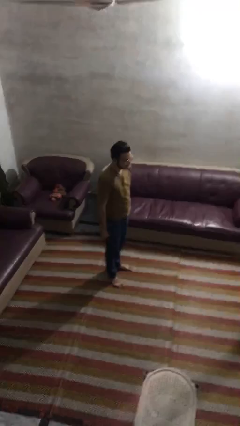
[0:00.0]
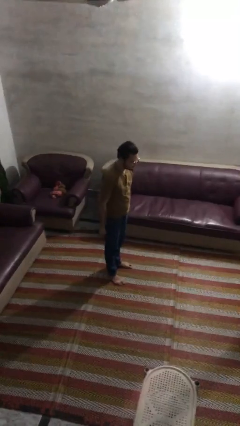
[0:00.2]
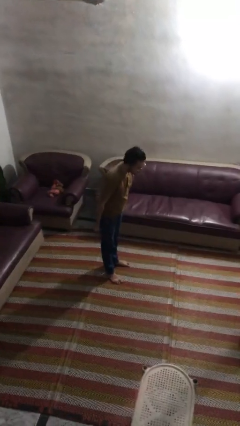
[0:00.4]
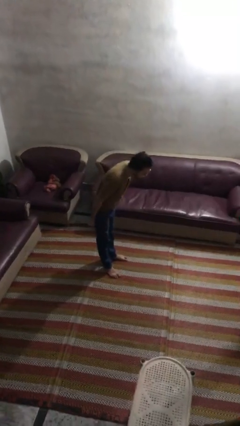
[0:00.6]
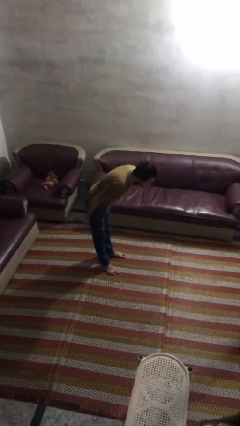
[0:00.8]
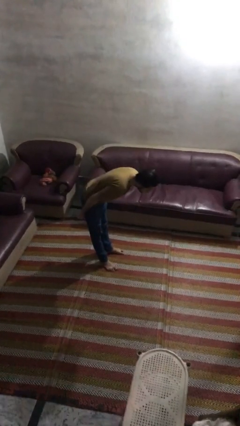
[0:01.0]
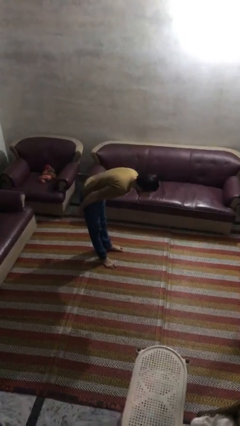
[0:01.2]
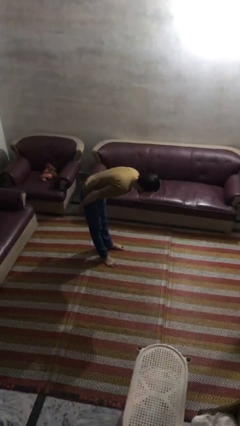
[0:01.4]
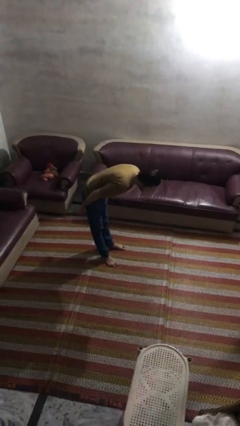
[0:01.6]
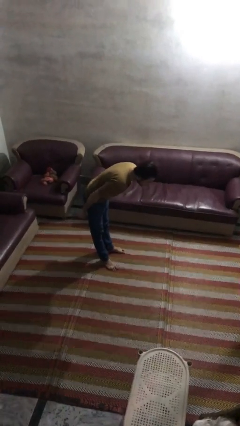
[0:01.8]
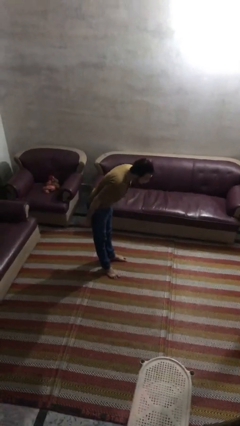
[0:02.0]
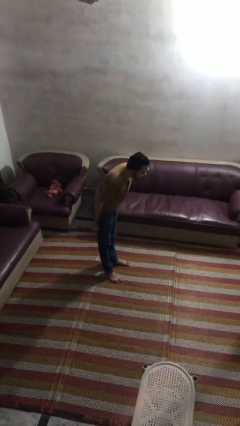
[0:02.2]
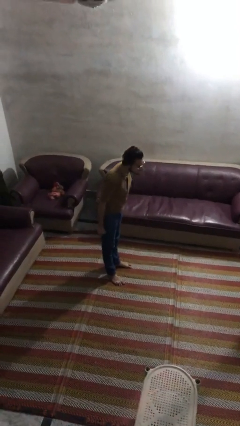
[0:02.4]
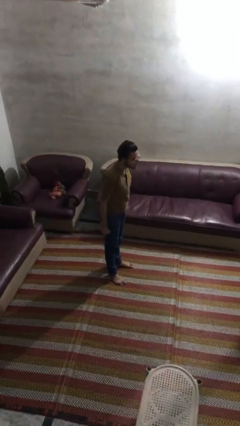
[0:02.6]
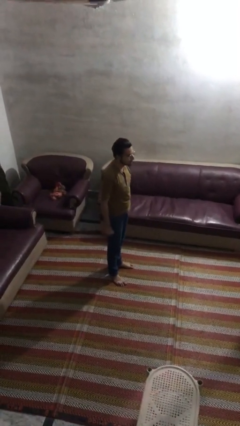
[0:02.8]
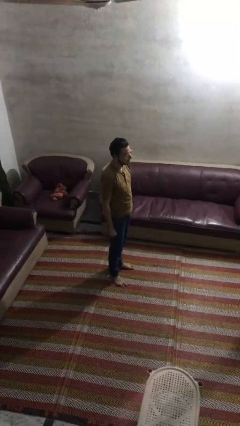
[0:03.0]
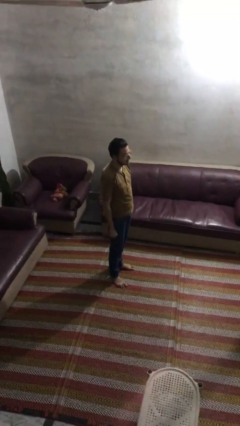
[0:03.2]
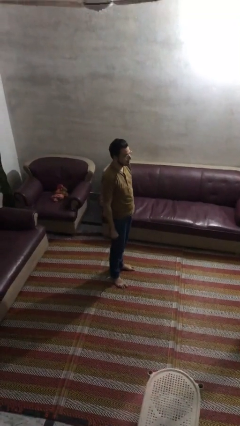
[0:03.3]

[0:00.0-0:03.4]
person bows

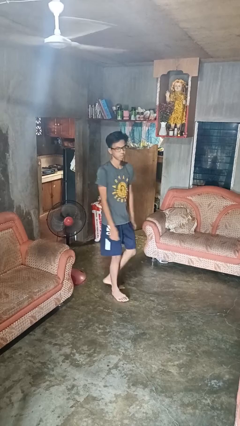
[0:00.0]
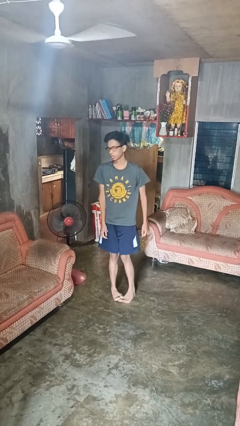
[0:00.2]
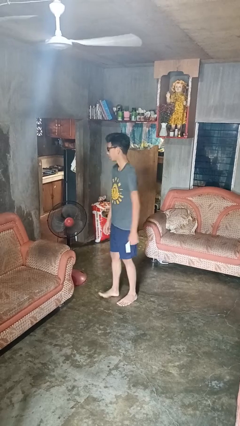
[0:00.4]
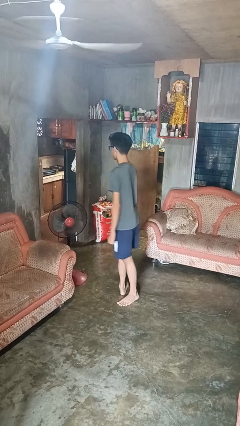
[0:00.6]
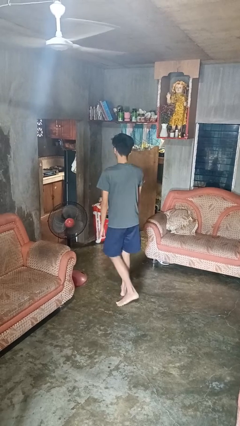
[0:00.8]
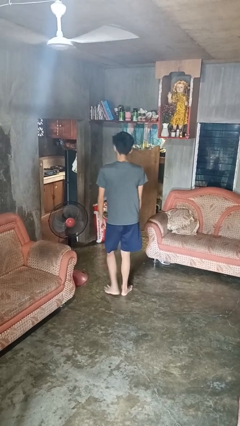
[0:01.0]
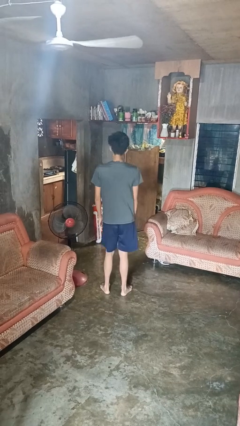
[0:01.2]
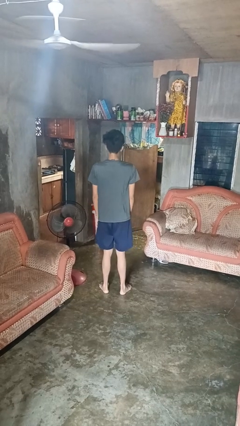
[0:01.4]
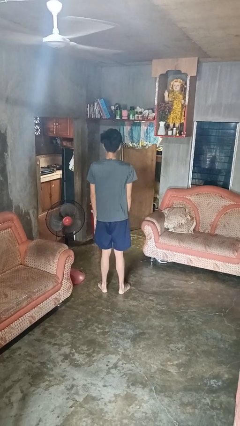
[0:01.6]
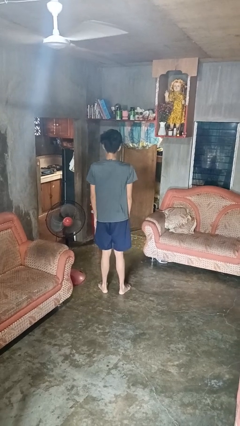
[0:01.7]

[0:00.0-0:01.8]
person twirls

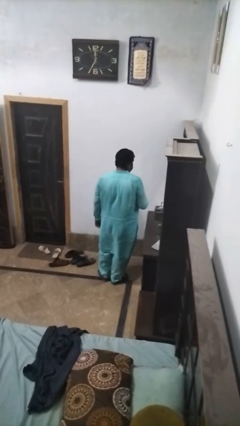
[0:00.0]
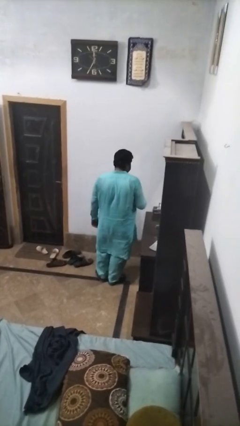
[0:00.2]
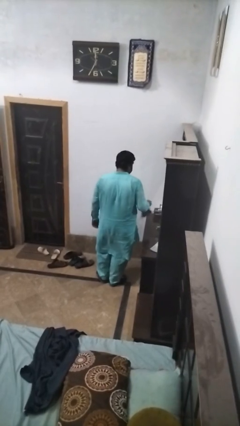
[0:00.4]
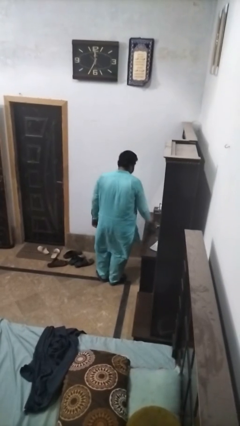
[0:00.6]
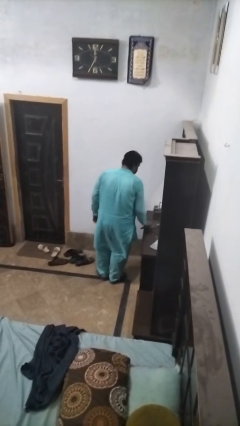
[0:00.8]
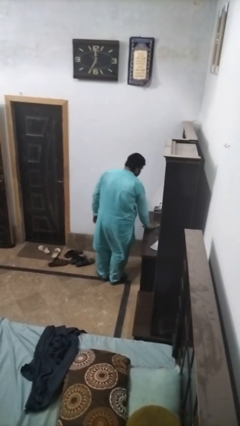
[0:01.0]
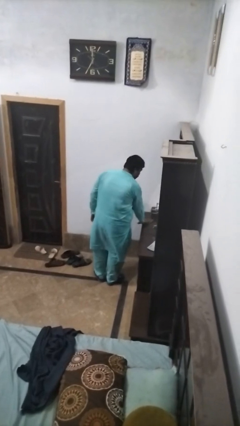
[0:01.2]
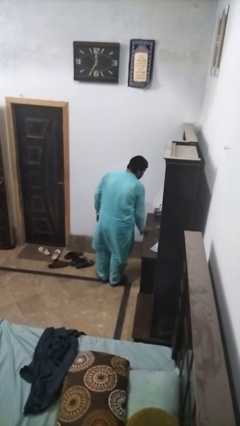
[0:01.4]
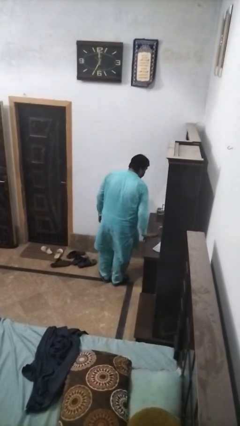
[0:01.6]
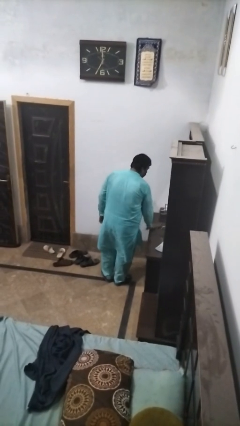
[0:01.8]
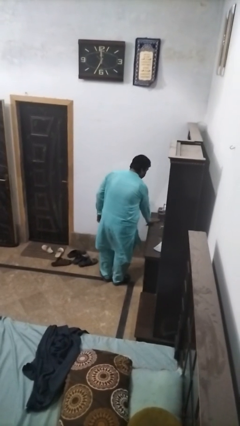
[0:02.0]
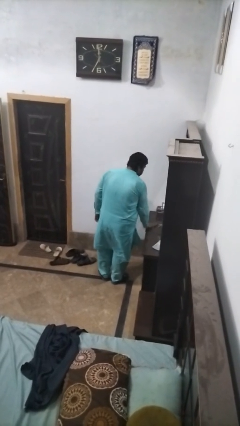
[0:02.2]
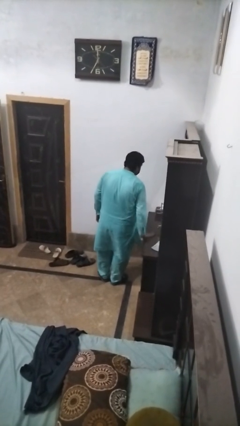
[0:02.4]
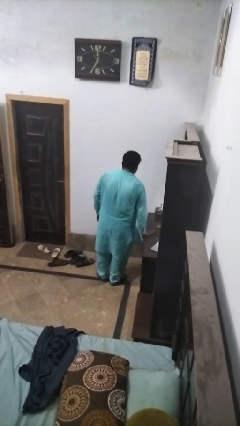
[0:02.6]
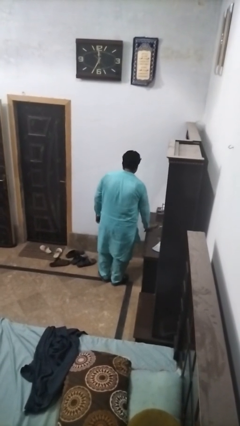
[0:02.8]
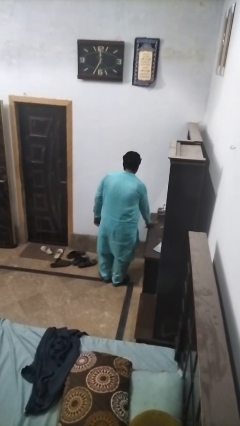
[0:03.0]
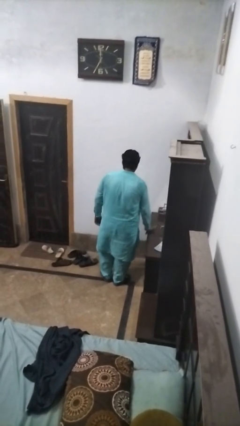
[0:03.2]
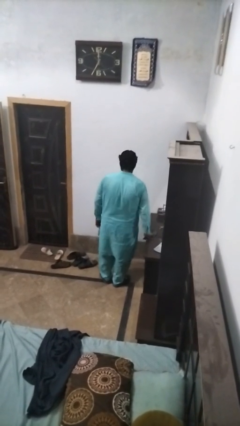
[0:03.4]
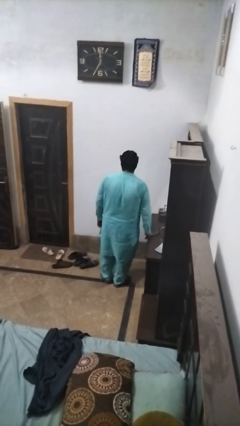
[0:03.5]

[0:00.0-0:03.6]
person cleans table with rag

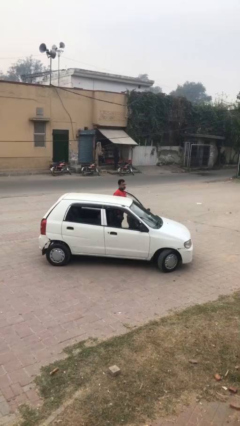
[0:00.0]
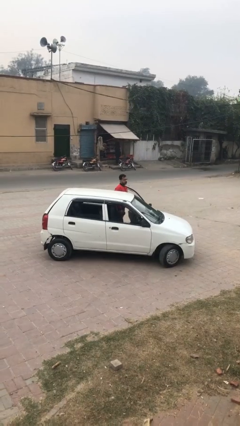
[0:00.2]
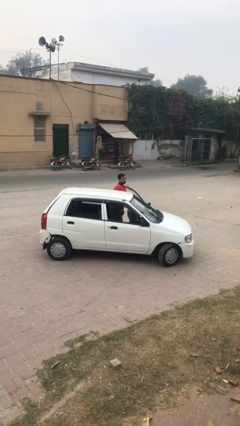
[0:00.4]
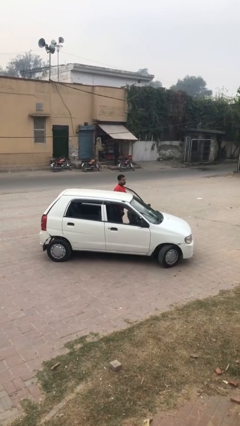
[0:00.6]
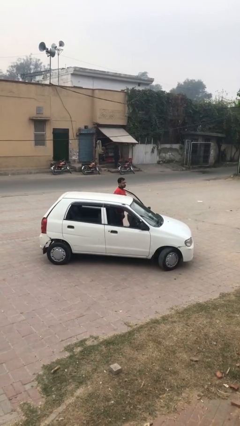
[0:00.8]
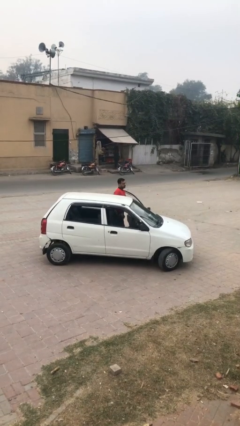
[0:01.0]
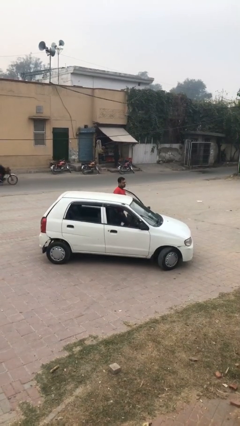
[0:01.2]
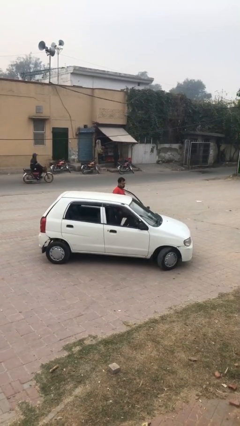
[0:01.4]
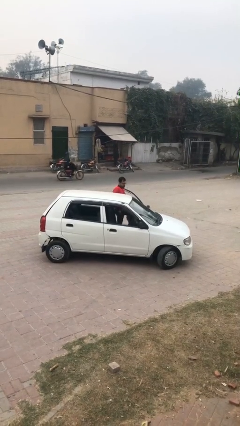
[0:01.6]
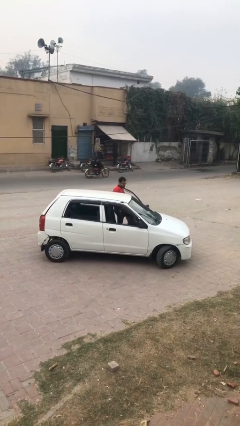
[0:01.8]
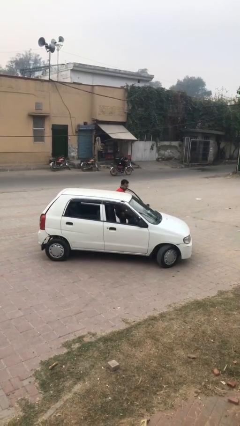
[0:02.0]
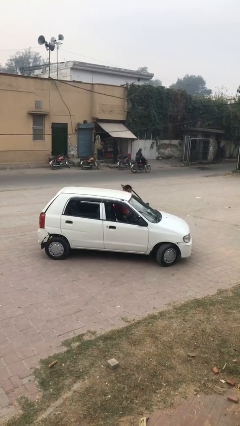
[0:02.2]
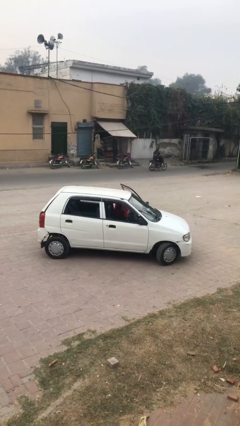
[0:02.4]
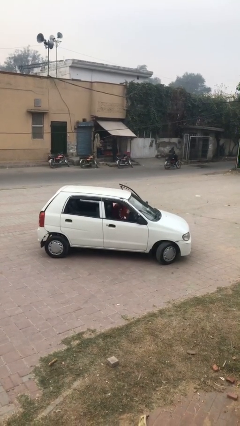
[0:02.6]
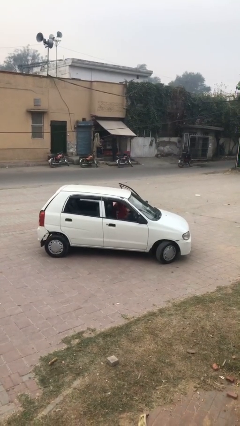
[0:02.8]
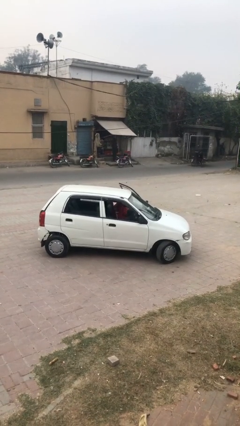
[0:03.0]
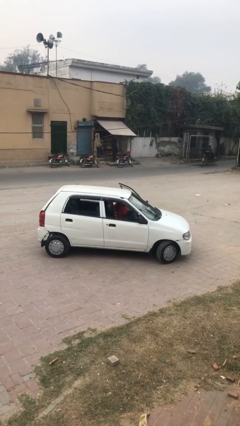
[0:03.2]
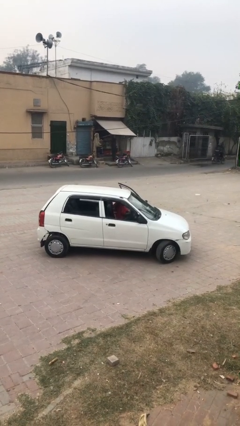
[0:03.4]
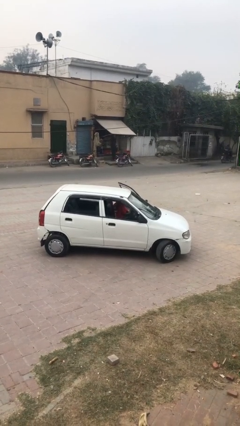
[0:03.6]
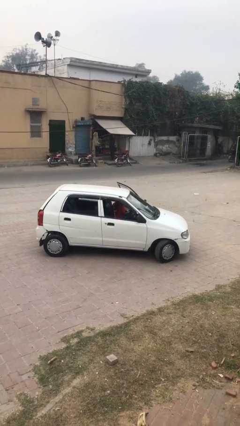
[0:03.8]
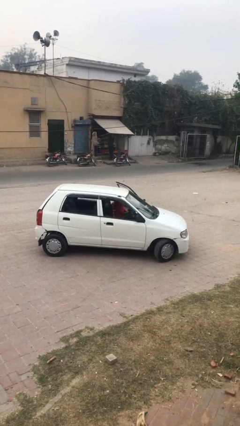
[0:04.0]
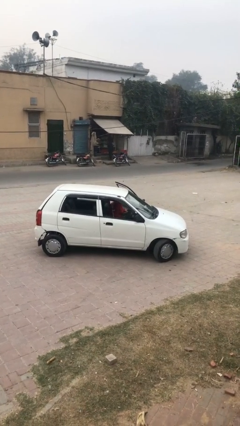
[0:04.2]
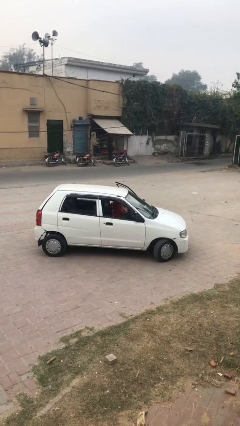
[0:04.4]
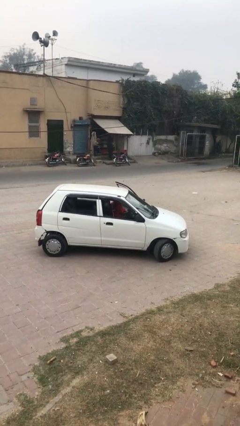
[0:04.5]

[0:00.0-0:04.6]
person enters car

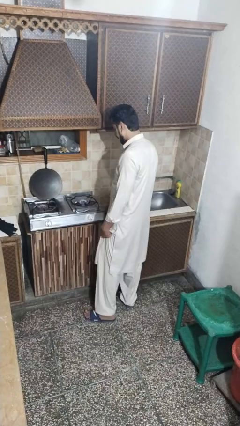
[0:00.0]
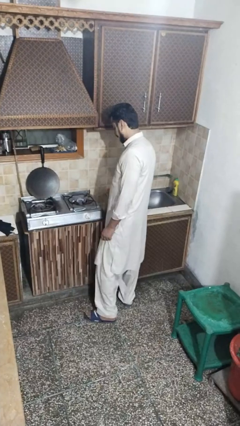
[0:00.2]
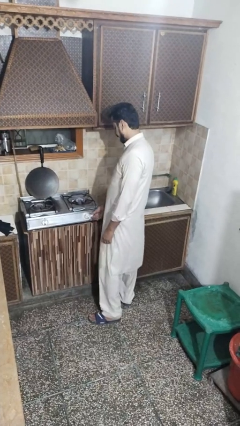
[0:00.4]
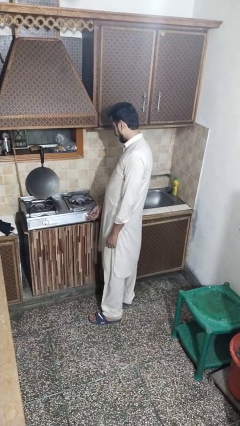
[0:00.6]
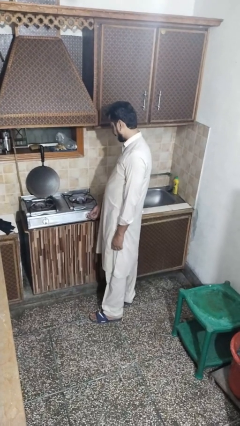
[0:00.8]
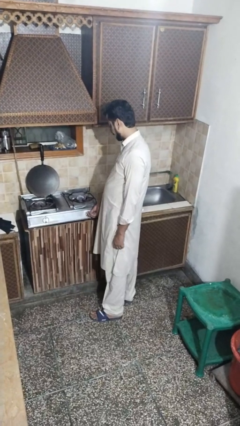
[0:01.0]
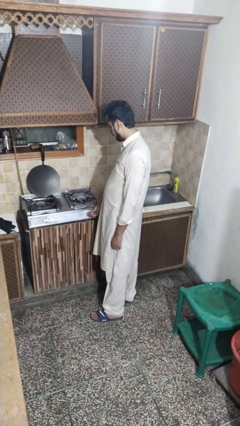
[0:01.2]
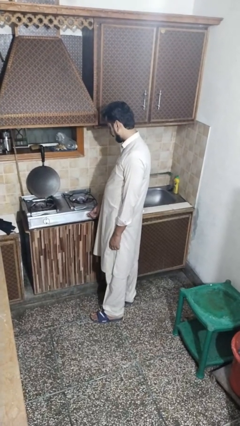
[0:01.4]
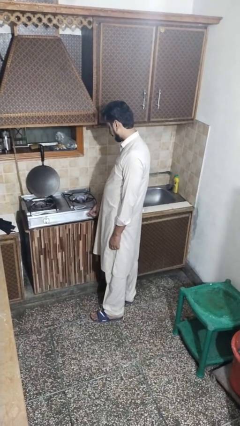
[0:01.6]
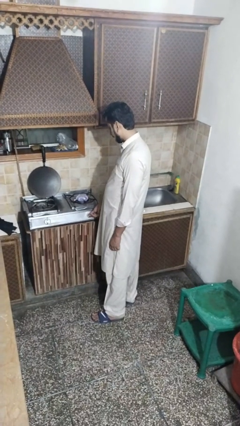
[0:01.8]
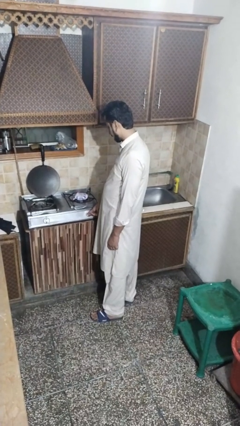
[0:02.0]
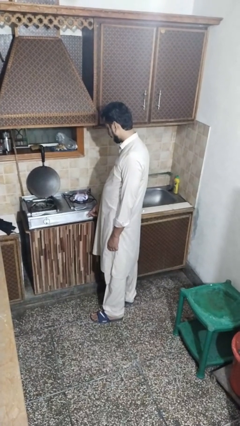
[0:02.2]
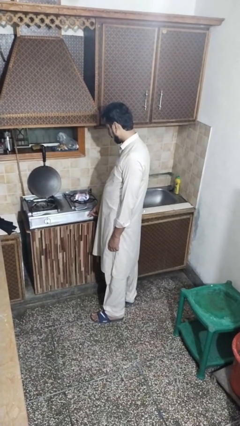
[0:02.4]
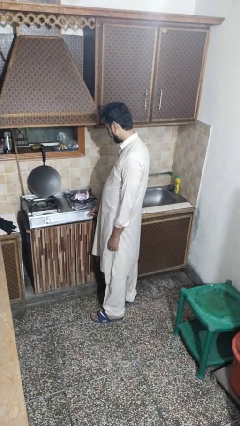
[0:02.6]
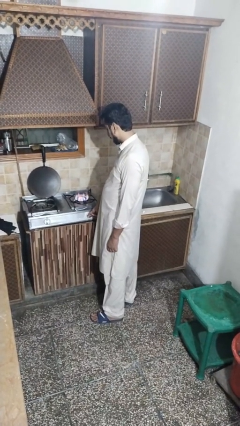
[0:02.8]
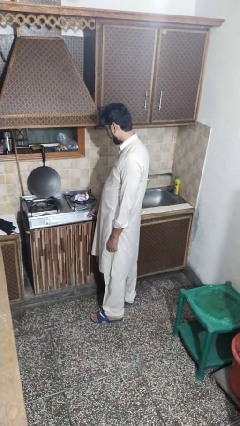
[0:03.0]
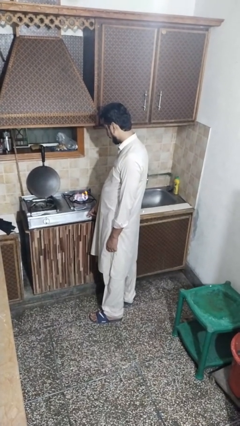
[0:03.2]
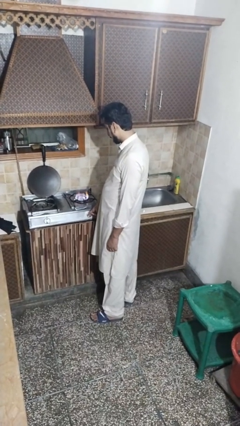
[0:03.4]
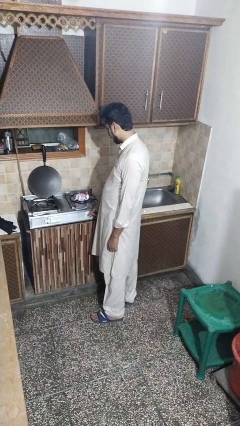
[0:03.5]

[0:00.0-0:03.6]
person turns on stovetop

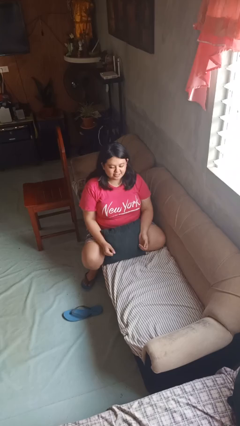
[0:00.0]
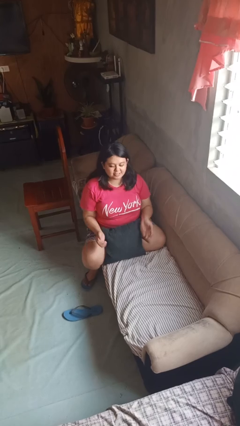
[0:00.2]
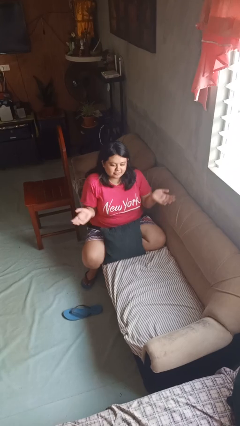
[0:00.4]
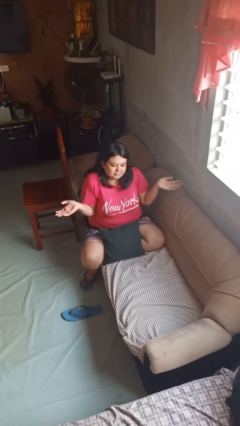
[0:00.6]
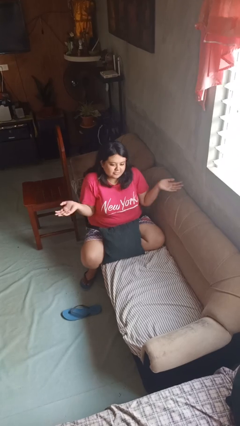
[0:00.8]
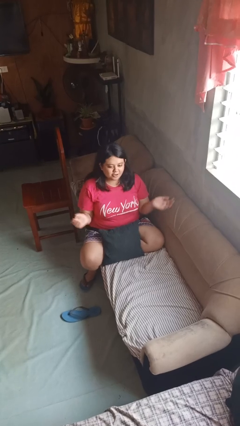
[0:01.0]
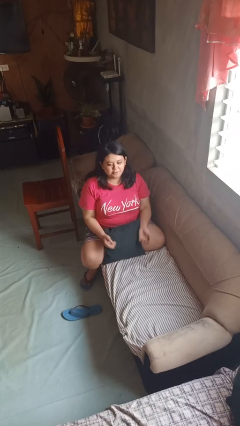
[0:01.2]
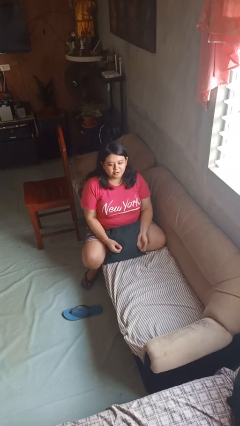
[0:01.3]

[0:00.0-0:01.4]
person shrugs
